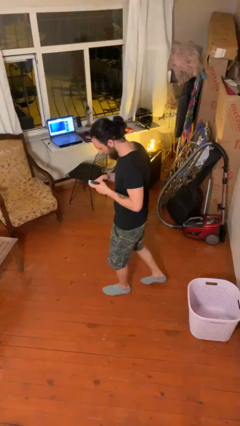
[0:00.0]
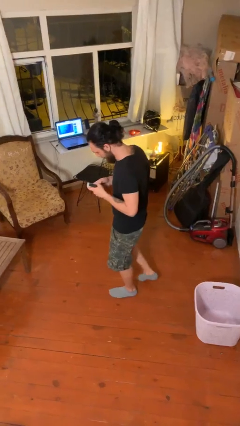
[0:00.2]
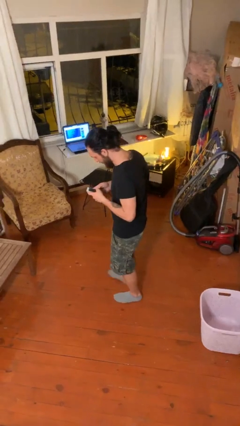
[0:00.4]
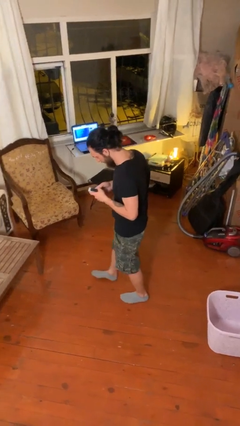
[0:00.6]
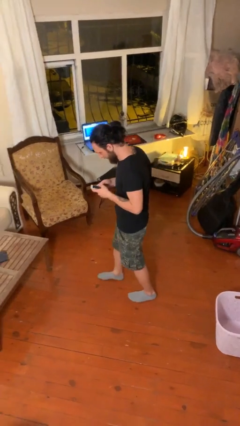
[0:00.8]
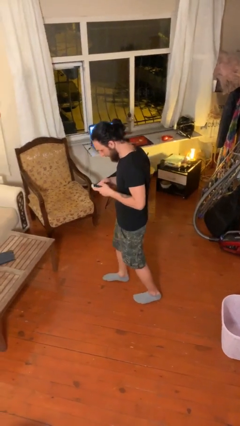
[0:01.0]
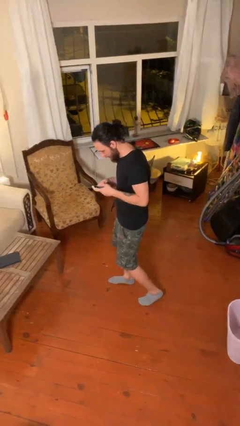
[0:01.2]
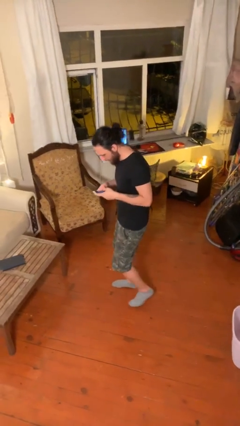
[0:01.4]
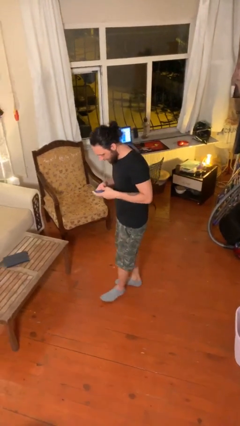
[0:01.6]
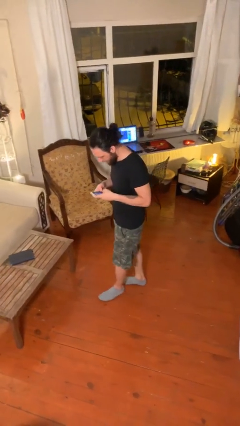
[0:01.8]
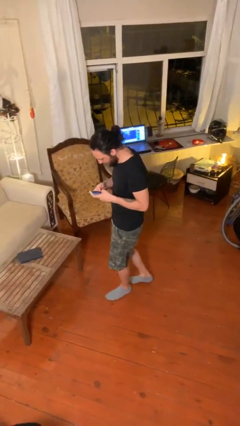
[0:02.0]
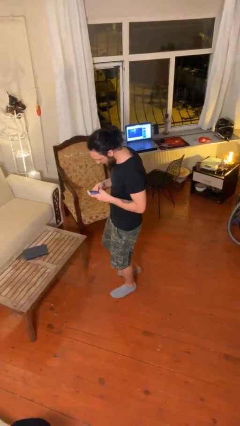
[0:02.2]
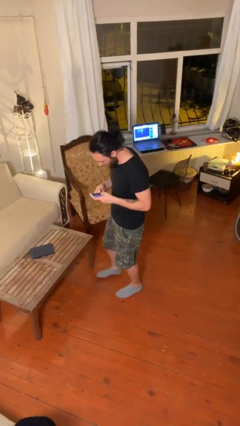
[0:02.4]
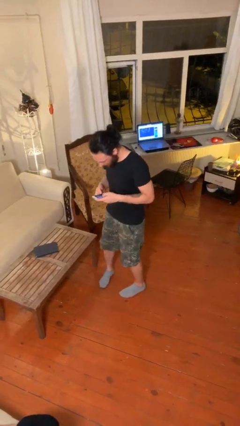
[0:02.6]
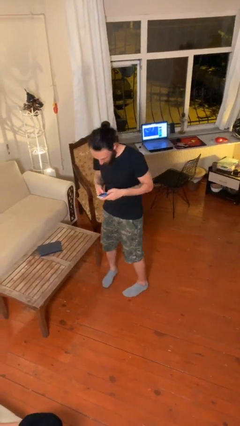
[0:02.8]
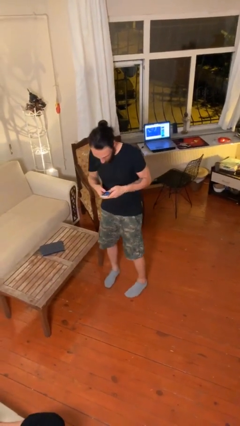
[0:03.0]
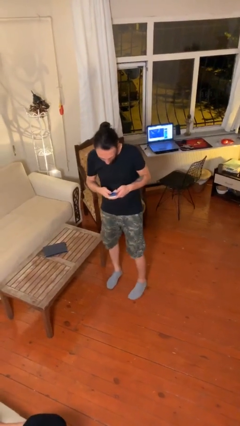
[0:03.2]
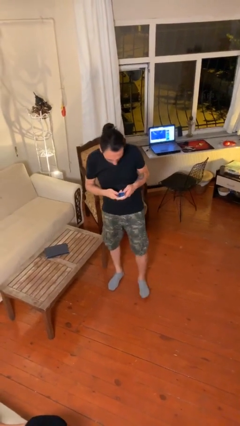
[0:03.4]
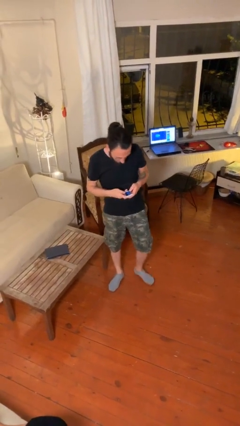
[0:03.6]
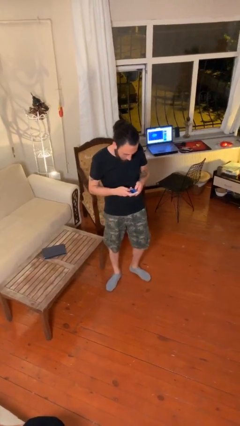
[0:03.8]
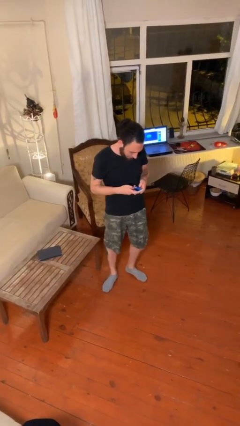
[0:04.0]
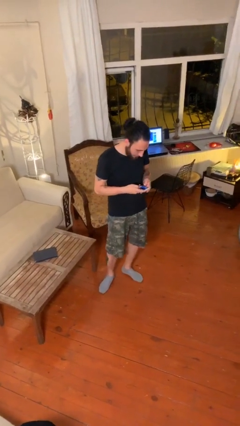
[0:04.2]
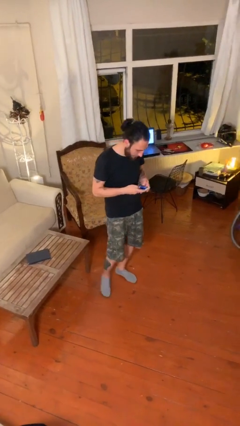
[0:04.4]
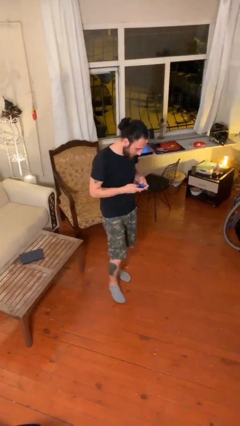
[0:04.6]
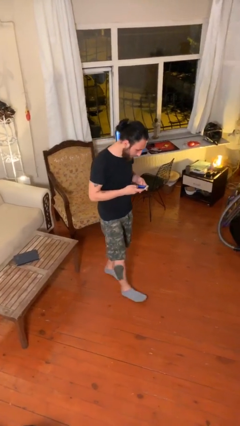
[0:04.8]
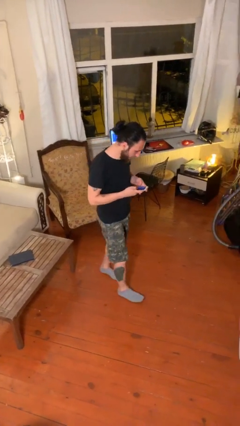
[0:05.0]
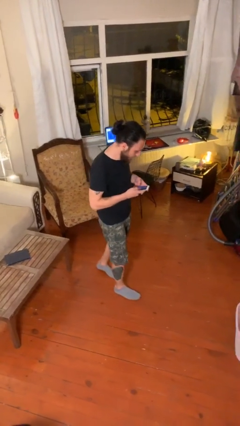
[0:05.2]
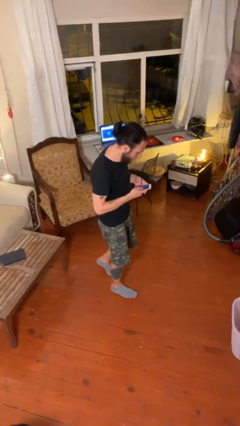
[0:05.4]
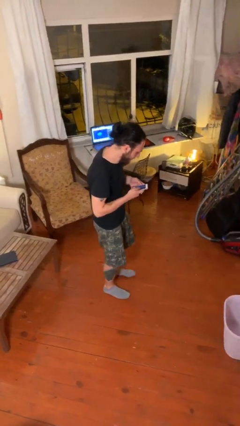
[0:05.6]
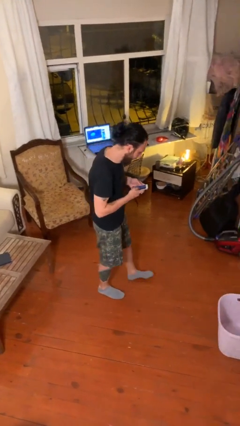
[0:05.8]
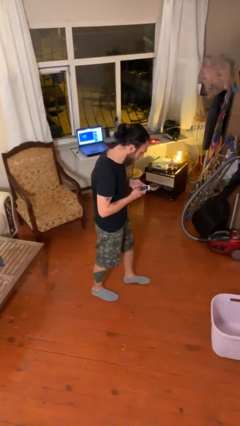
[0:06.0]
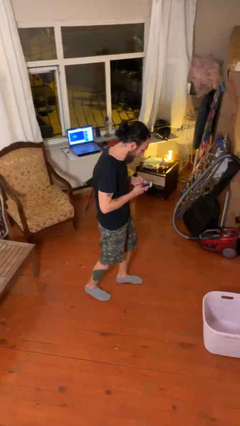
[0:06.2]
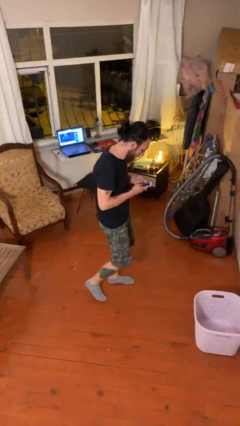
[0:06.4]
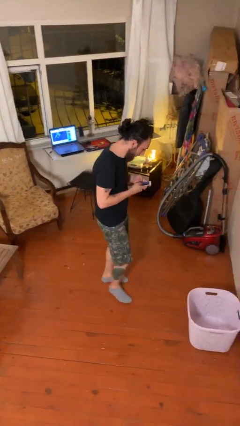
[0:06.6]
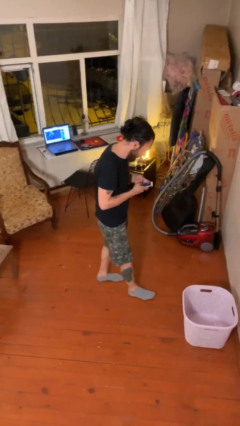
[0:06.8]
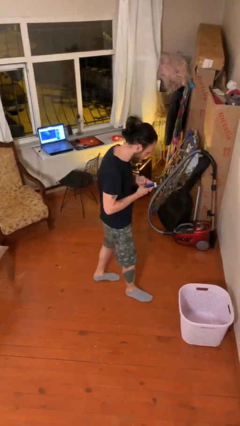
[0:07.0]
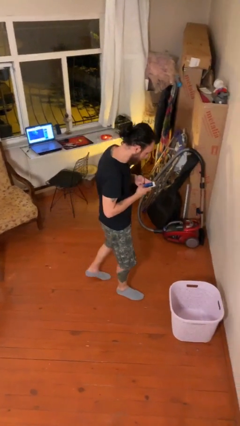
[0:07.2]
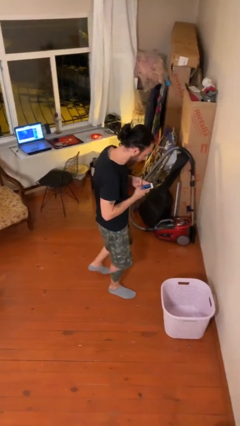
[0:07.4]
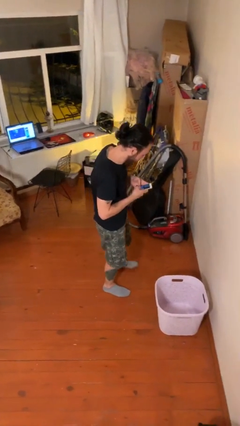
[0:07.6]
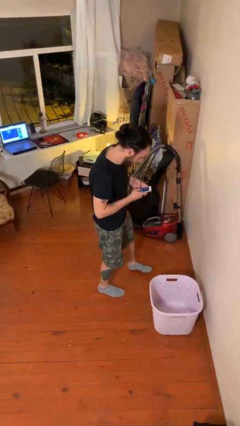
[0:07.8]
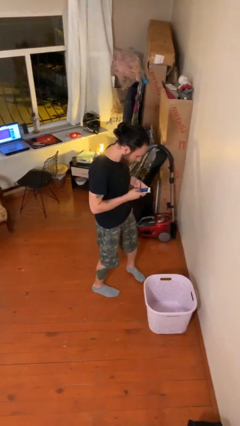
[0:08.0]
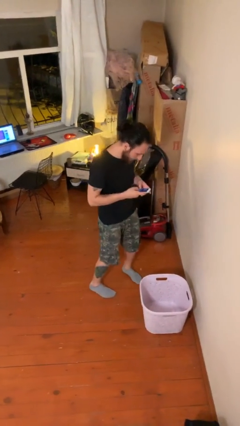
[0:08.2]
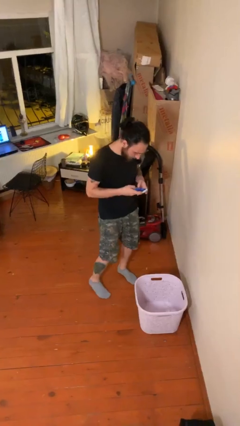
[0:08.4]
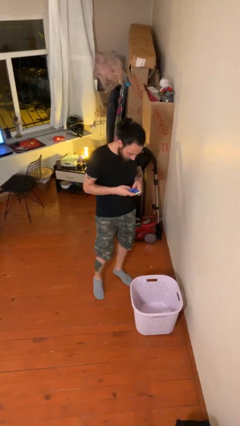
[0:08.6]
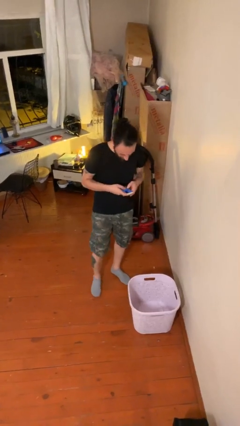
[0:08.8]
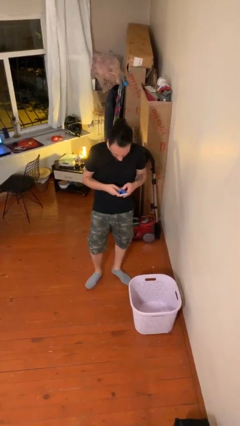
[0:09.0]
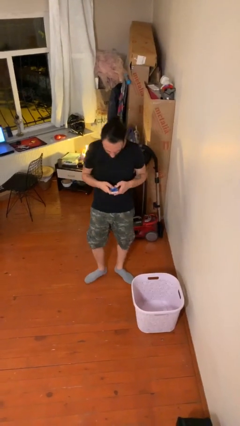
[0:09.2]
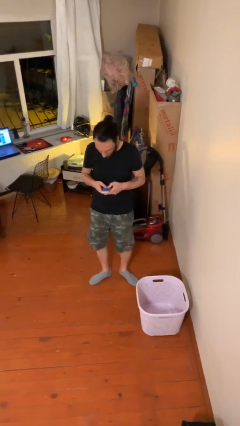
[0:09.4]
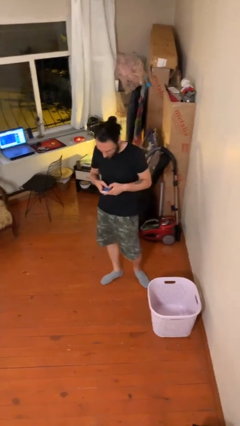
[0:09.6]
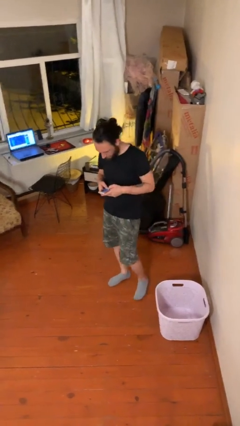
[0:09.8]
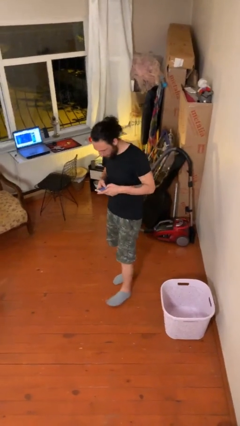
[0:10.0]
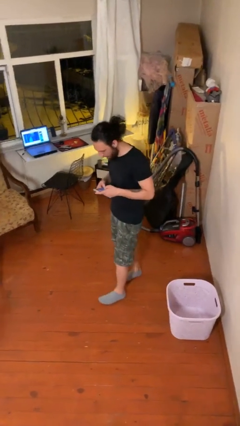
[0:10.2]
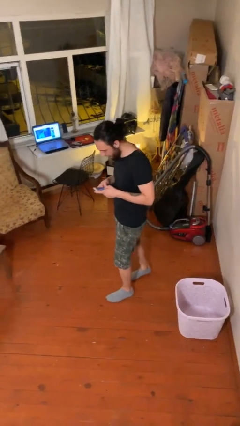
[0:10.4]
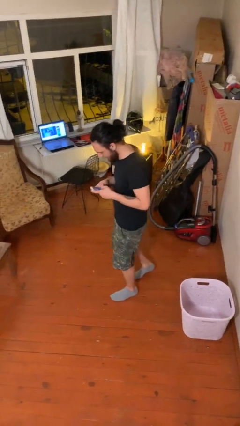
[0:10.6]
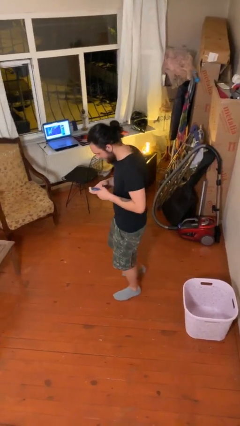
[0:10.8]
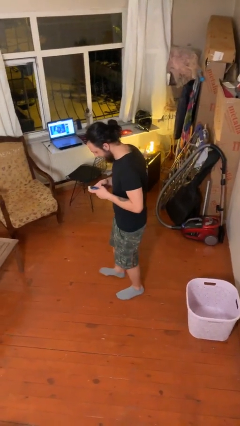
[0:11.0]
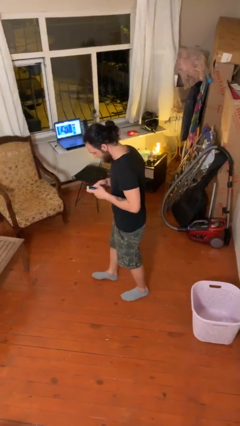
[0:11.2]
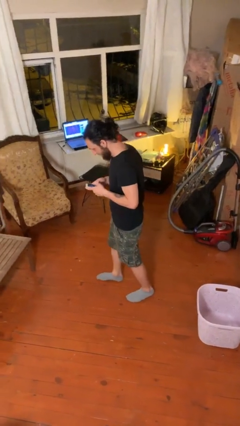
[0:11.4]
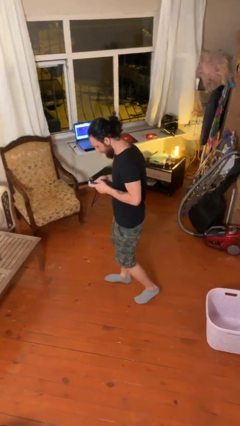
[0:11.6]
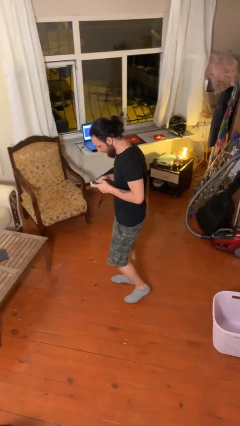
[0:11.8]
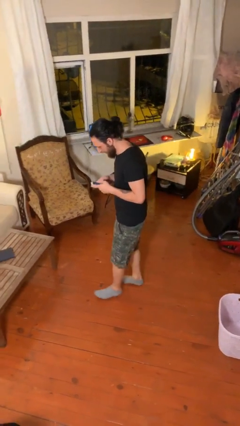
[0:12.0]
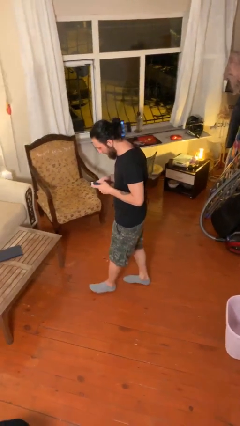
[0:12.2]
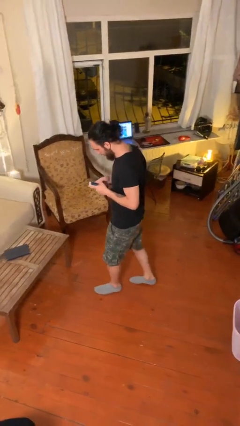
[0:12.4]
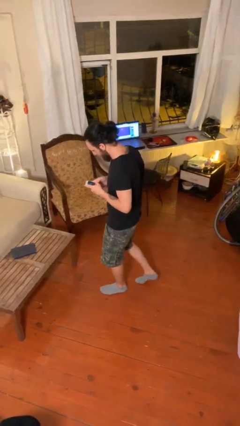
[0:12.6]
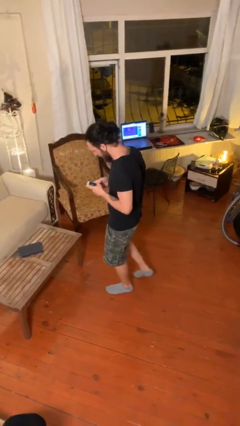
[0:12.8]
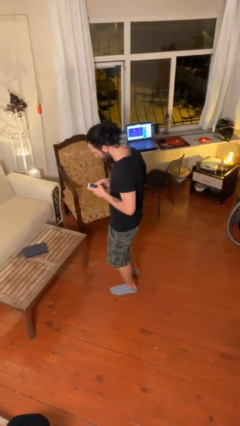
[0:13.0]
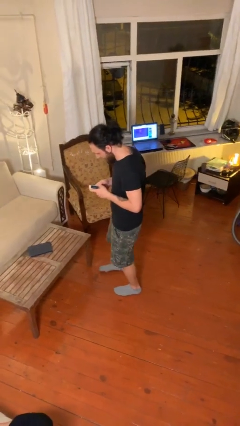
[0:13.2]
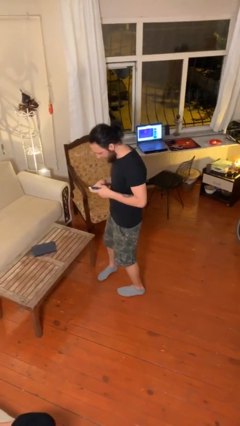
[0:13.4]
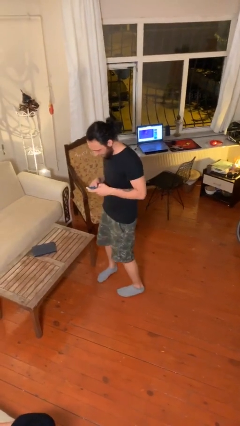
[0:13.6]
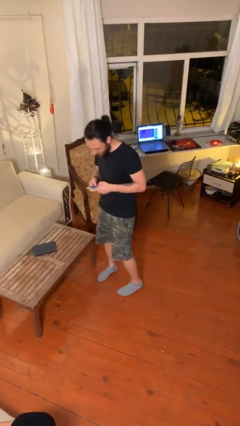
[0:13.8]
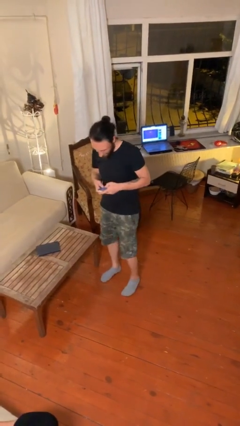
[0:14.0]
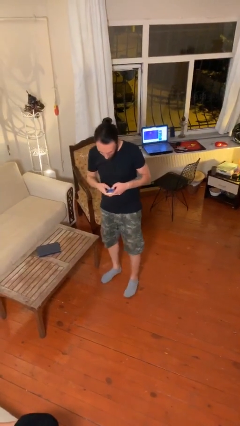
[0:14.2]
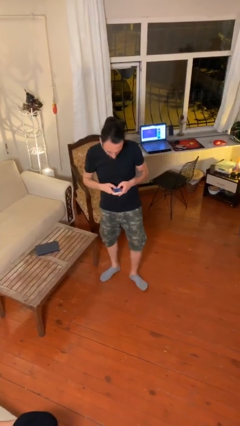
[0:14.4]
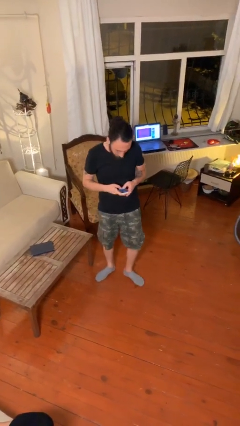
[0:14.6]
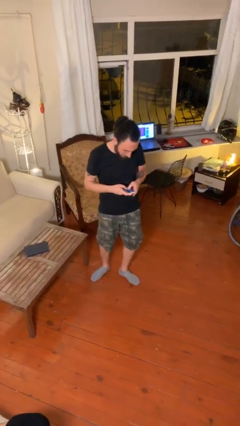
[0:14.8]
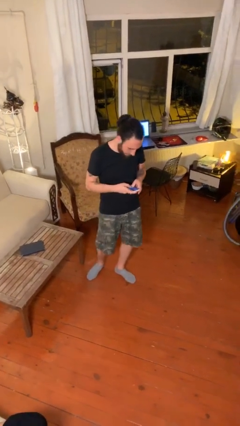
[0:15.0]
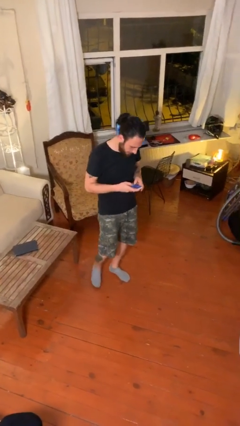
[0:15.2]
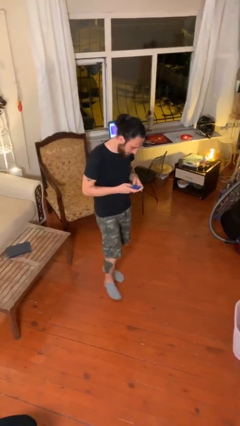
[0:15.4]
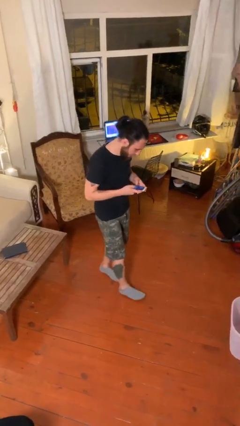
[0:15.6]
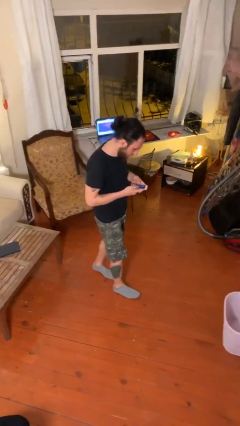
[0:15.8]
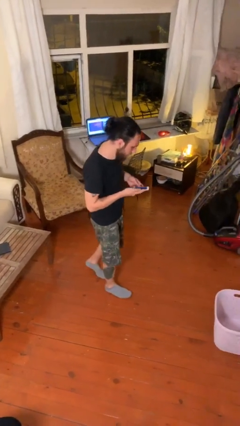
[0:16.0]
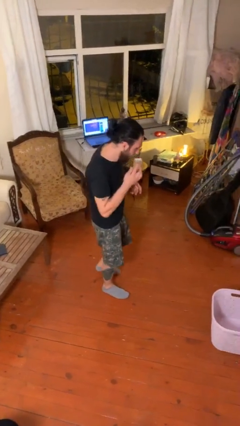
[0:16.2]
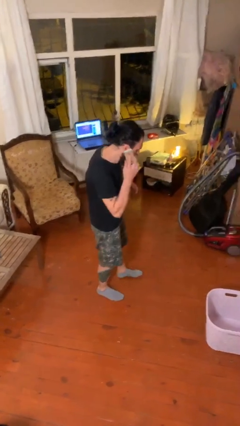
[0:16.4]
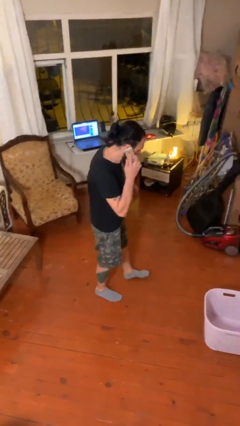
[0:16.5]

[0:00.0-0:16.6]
person texts on phone

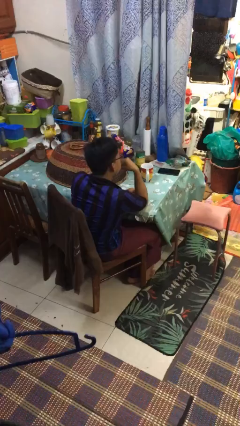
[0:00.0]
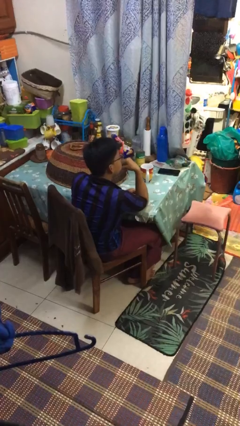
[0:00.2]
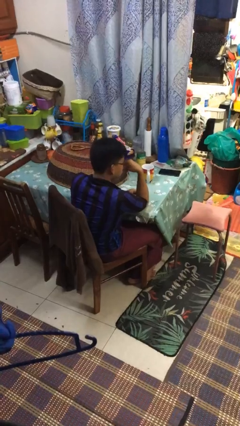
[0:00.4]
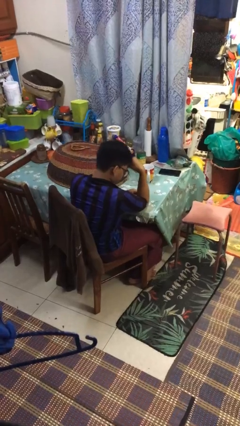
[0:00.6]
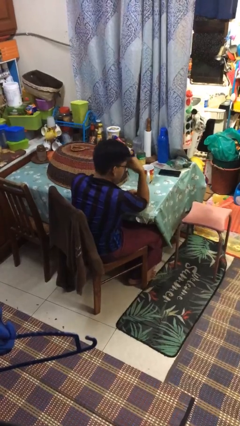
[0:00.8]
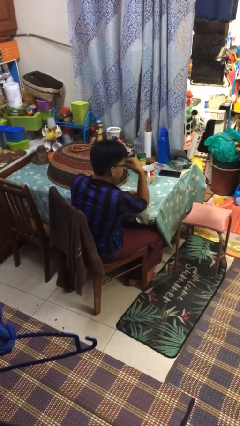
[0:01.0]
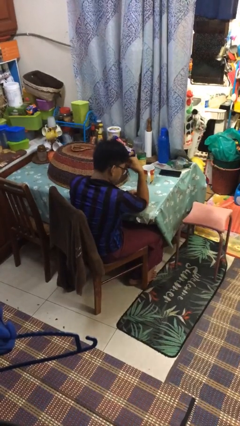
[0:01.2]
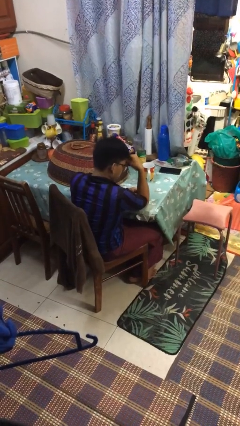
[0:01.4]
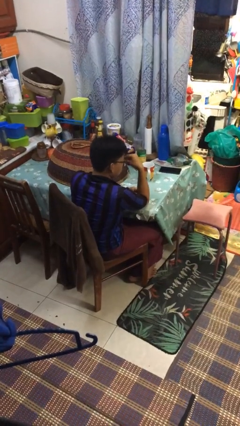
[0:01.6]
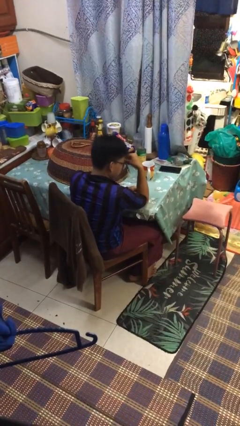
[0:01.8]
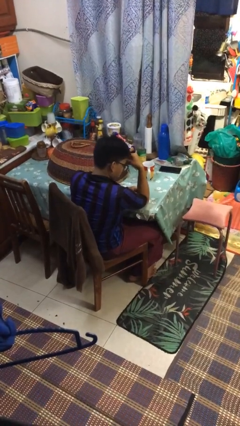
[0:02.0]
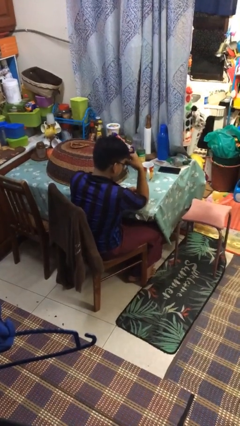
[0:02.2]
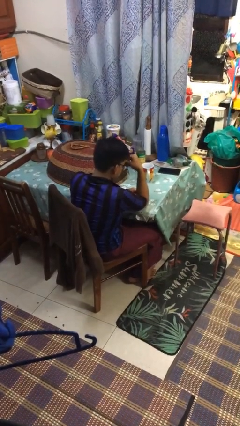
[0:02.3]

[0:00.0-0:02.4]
person nods head
